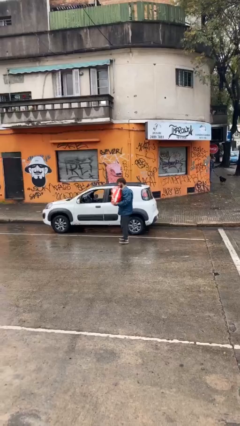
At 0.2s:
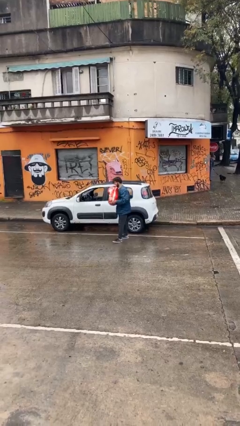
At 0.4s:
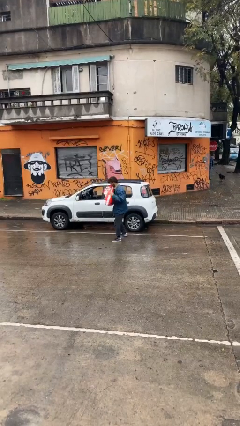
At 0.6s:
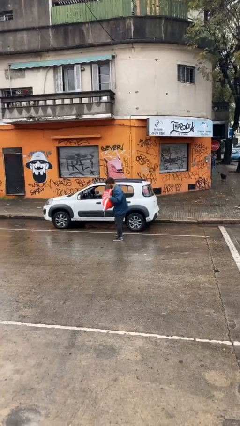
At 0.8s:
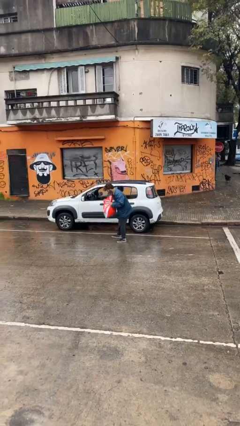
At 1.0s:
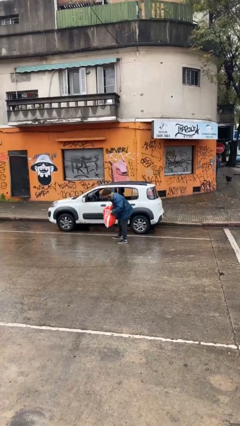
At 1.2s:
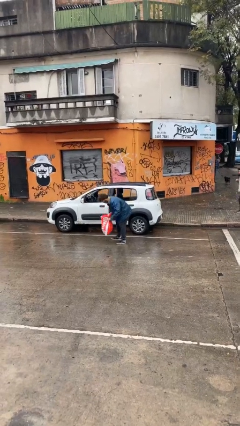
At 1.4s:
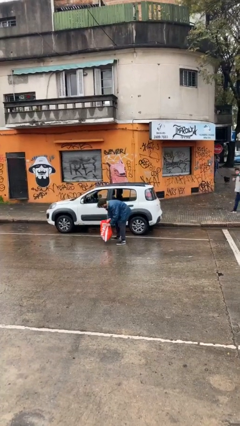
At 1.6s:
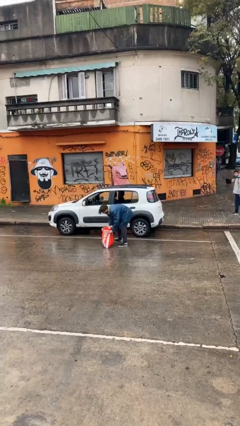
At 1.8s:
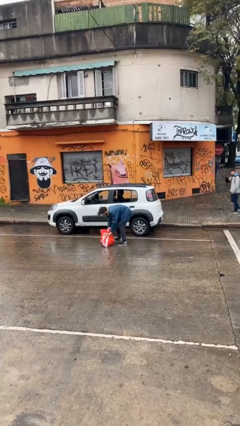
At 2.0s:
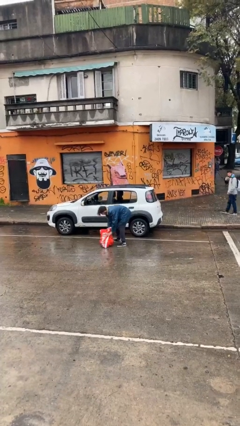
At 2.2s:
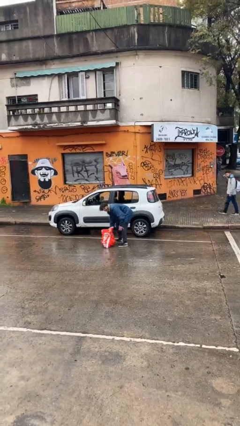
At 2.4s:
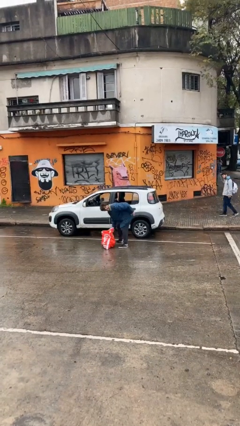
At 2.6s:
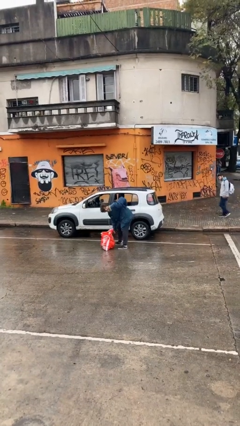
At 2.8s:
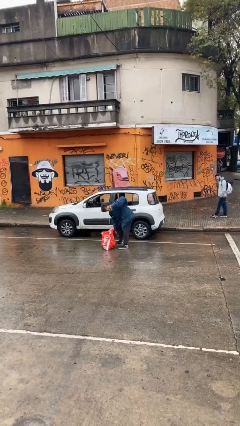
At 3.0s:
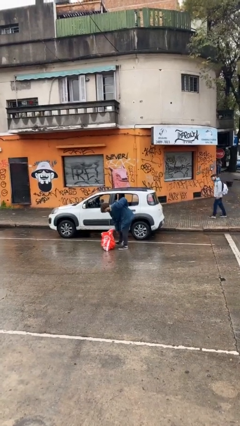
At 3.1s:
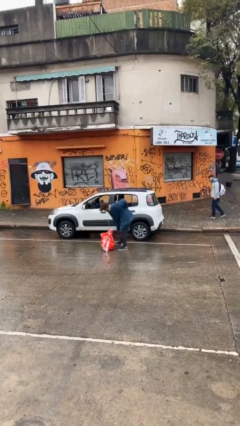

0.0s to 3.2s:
person puts down object on floor

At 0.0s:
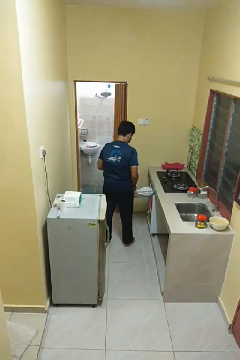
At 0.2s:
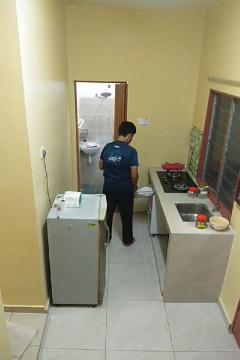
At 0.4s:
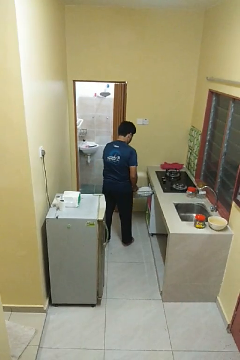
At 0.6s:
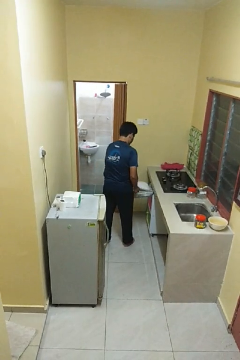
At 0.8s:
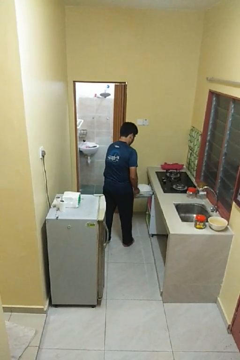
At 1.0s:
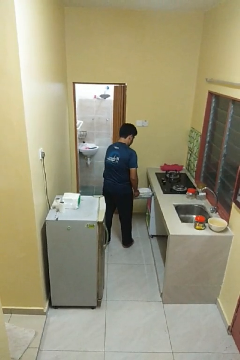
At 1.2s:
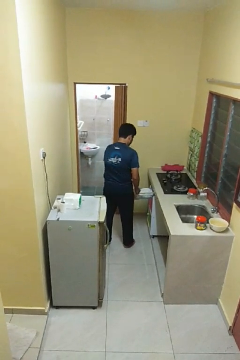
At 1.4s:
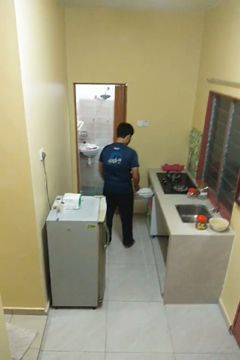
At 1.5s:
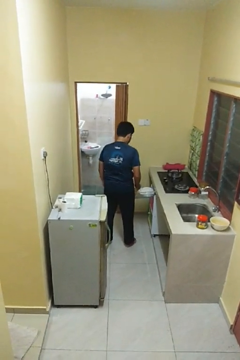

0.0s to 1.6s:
person puts object into kitchen drawer

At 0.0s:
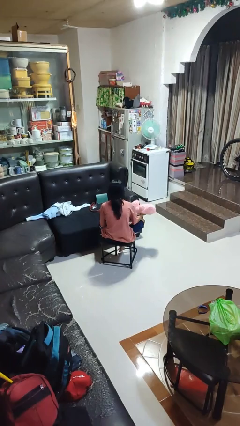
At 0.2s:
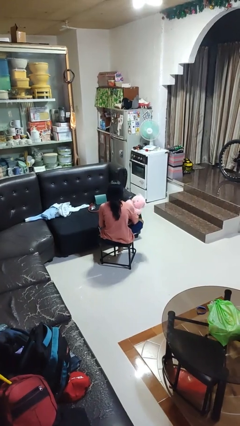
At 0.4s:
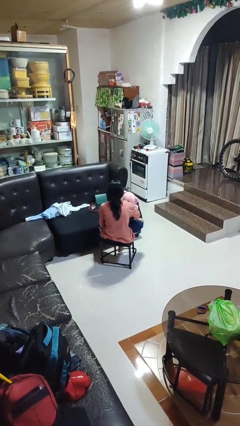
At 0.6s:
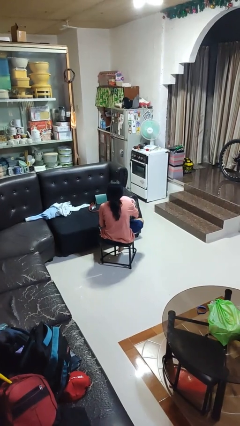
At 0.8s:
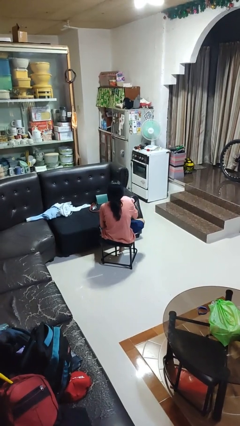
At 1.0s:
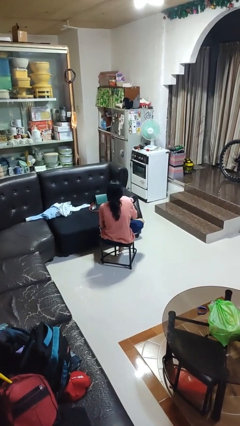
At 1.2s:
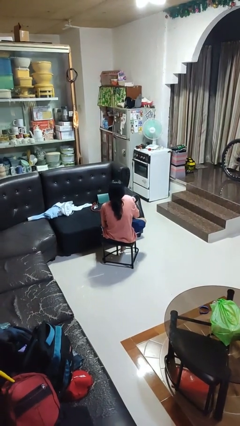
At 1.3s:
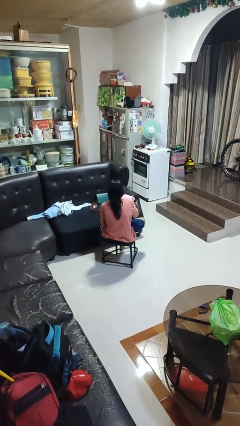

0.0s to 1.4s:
person hugs stuffed animal

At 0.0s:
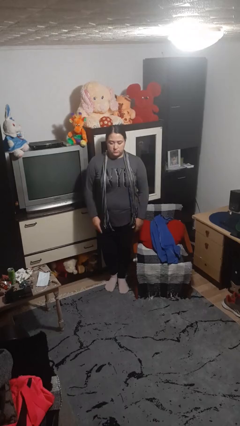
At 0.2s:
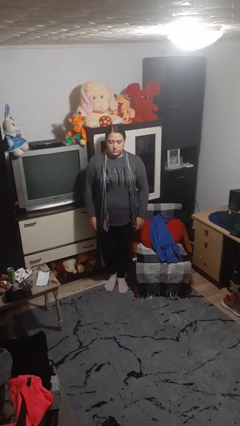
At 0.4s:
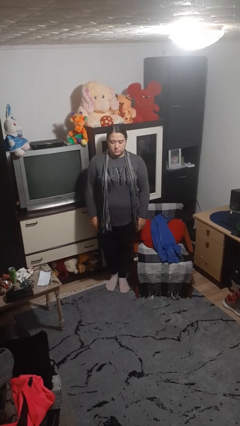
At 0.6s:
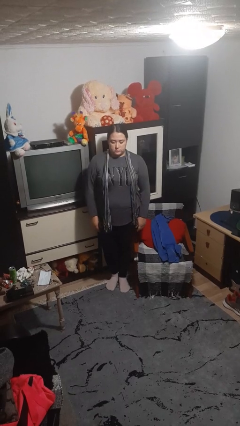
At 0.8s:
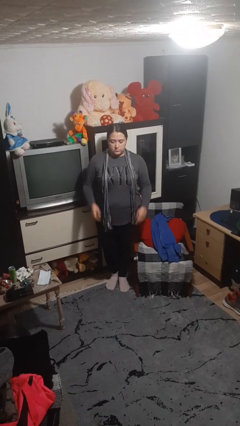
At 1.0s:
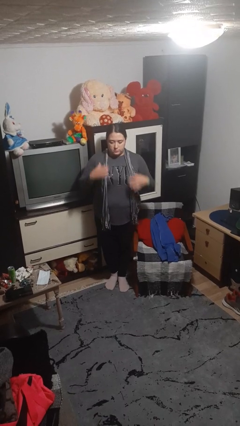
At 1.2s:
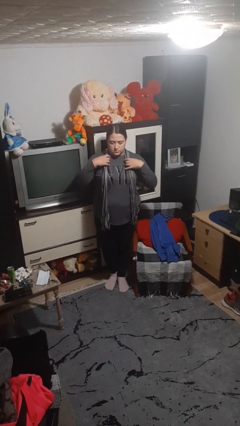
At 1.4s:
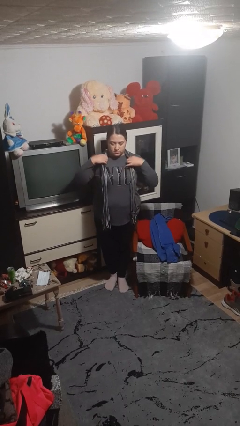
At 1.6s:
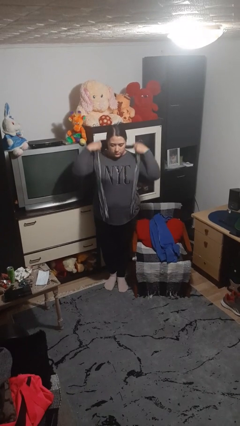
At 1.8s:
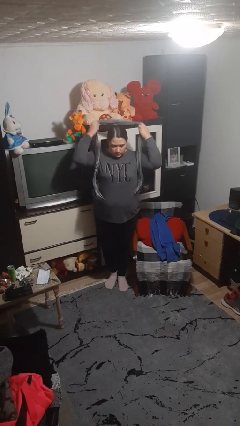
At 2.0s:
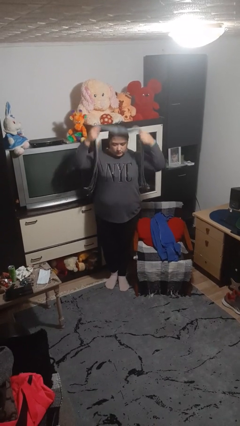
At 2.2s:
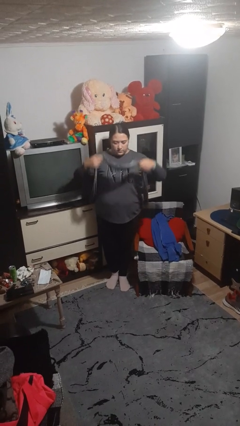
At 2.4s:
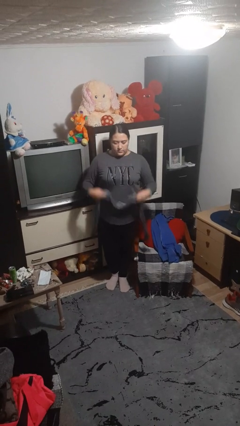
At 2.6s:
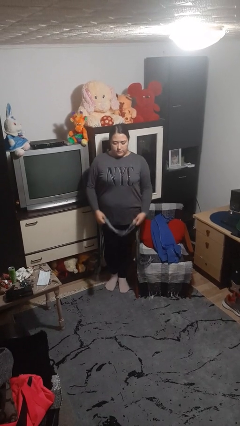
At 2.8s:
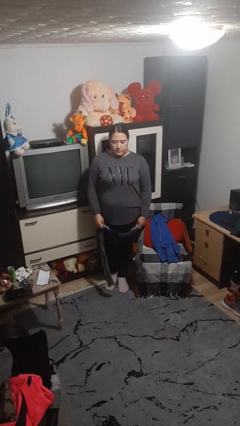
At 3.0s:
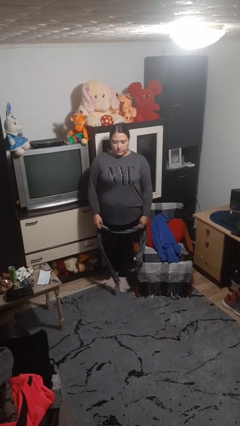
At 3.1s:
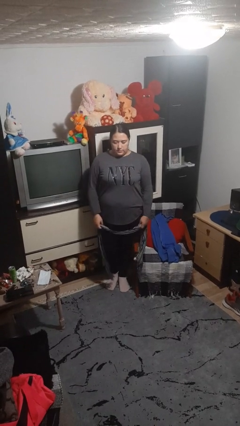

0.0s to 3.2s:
person takes off scarf

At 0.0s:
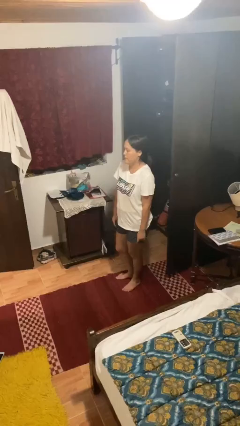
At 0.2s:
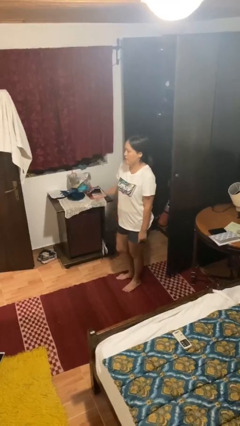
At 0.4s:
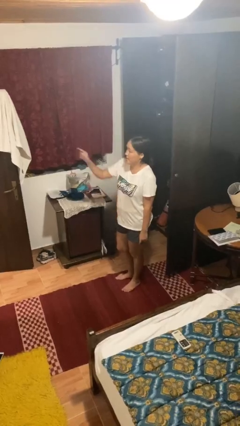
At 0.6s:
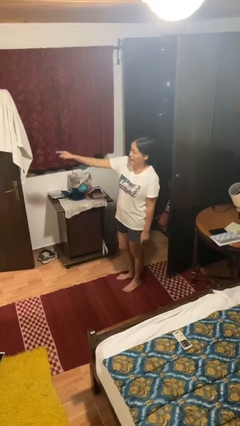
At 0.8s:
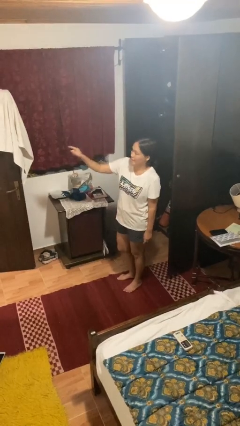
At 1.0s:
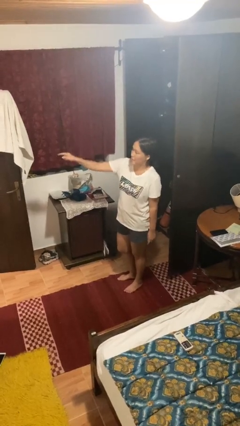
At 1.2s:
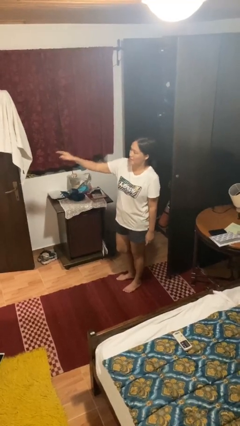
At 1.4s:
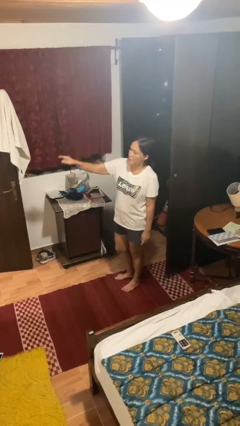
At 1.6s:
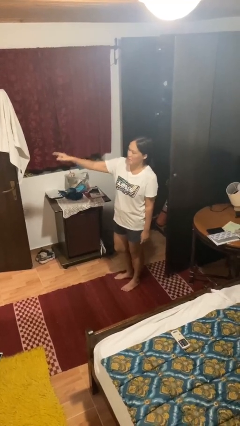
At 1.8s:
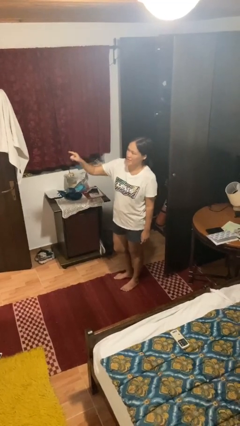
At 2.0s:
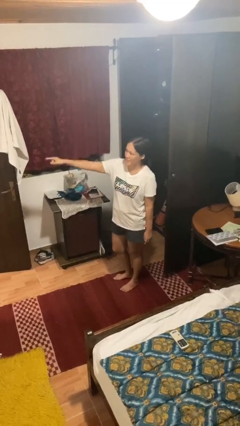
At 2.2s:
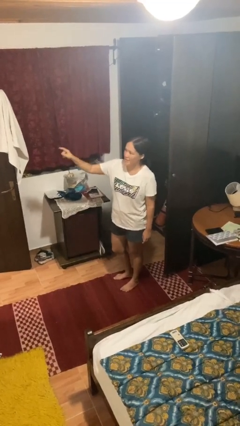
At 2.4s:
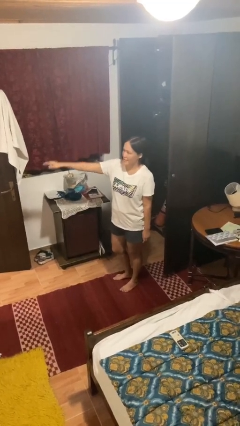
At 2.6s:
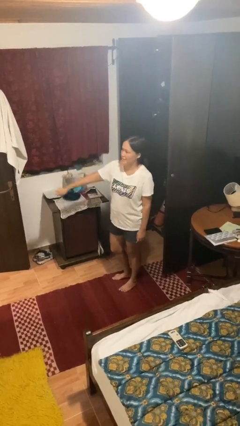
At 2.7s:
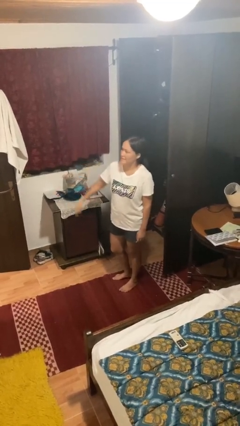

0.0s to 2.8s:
person points at person

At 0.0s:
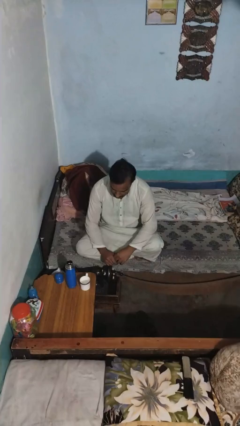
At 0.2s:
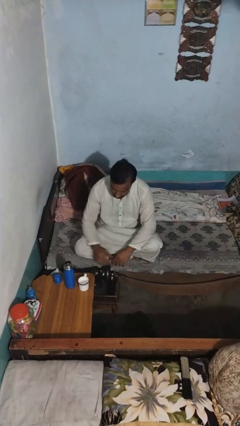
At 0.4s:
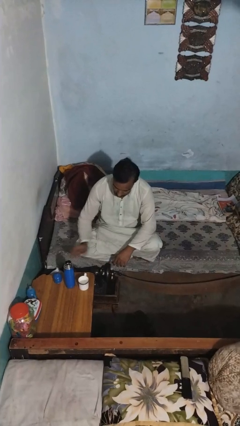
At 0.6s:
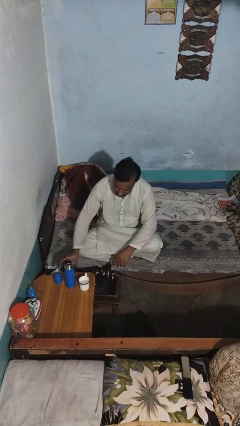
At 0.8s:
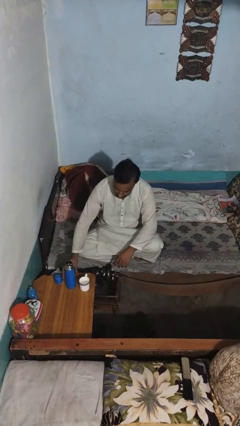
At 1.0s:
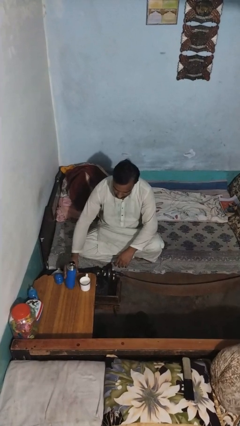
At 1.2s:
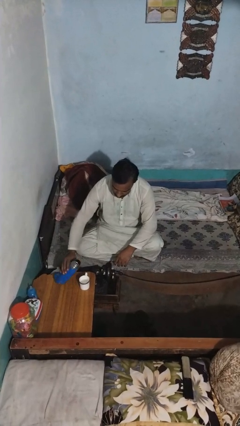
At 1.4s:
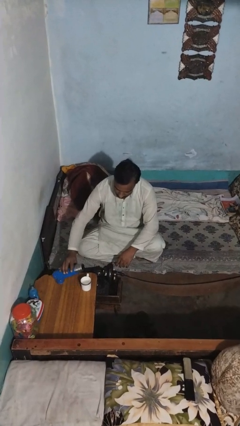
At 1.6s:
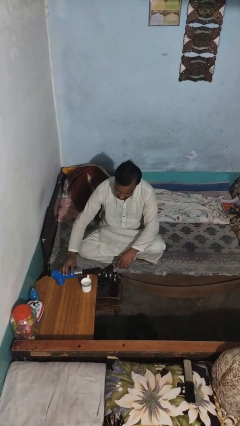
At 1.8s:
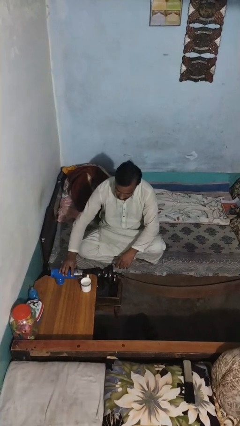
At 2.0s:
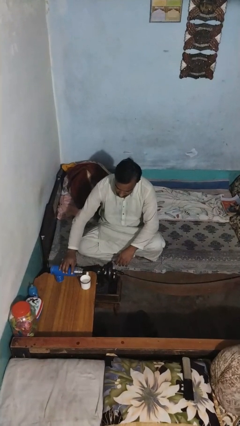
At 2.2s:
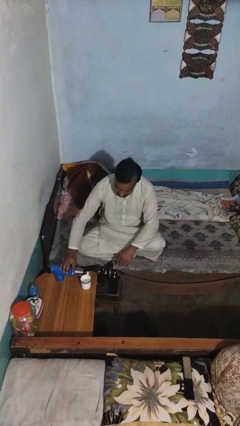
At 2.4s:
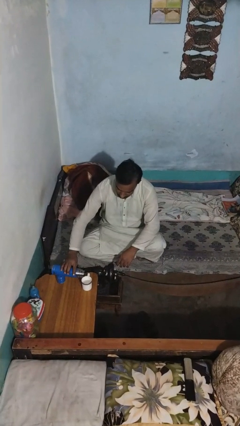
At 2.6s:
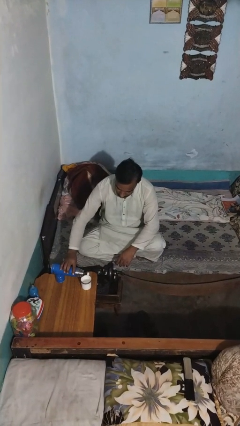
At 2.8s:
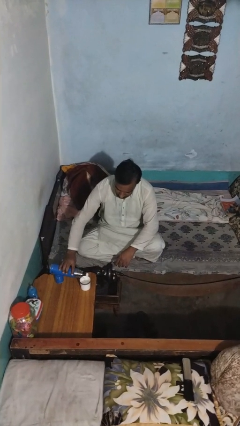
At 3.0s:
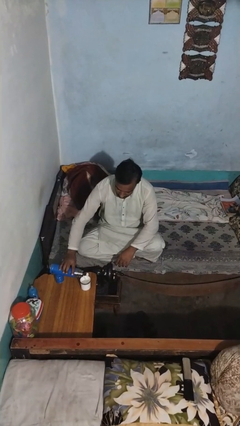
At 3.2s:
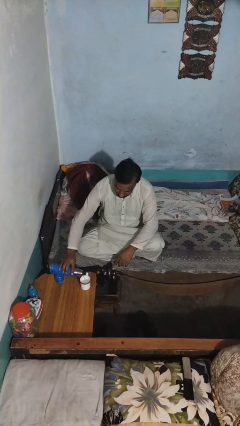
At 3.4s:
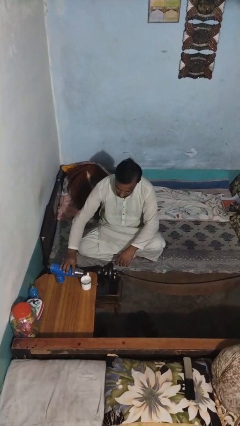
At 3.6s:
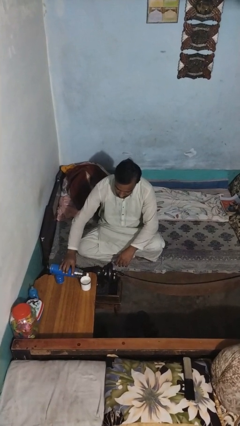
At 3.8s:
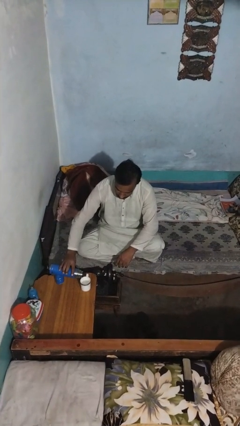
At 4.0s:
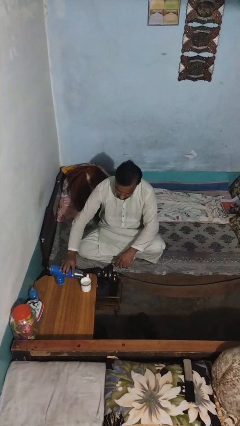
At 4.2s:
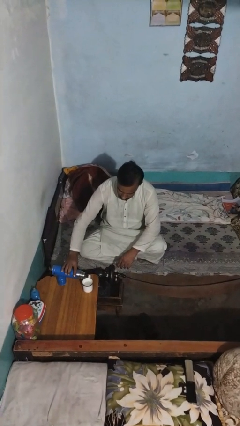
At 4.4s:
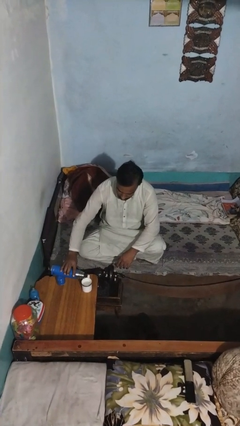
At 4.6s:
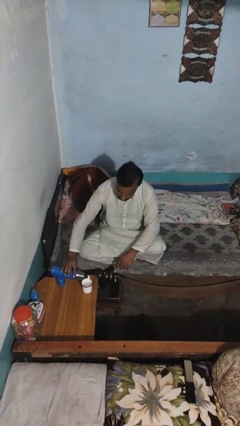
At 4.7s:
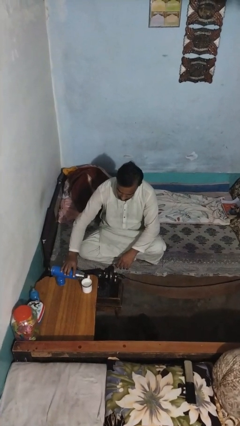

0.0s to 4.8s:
person pours liquid into cup

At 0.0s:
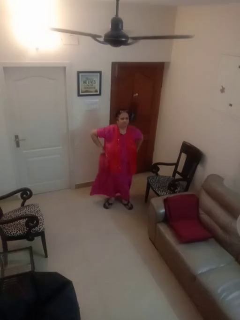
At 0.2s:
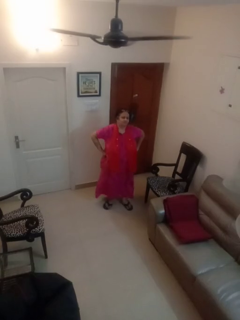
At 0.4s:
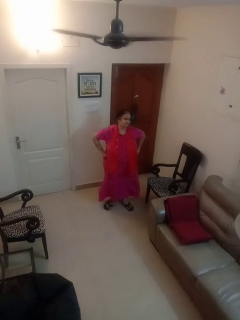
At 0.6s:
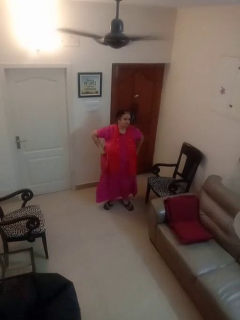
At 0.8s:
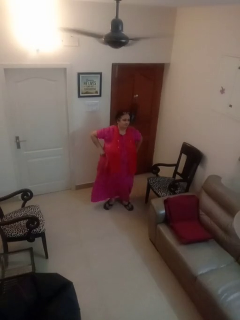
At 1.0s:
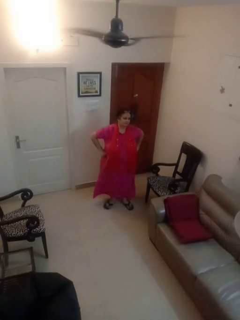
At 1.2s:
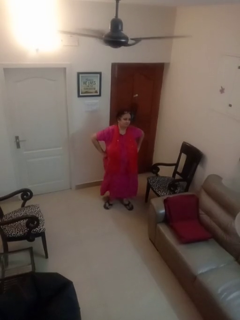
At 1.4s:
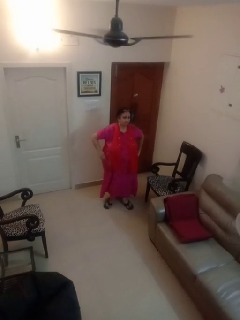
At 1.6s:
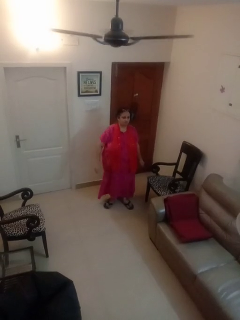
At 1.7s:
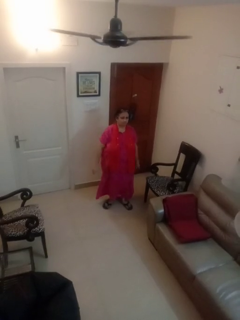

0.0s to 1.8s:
person wiggles hips
